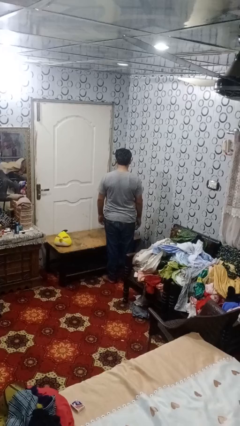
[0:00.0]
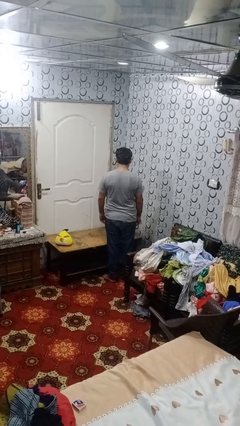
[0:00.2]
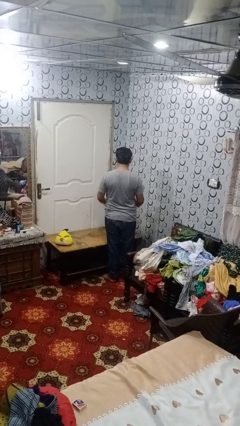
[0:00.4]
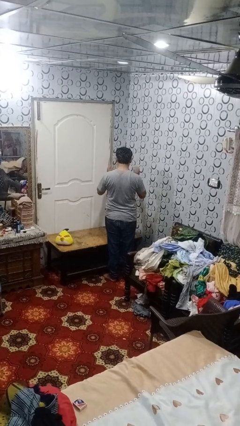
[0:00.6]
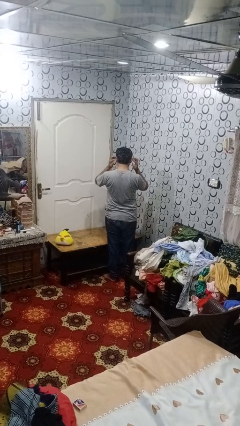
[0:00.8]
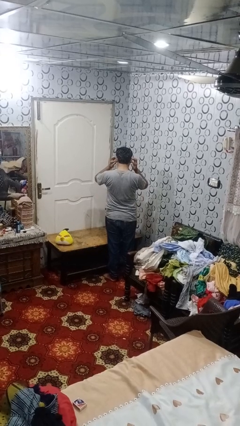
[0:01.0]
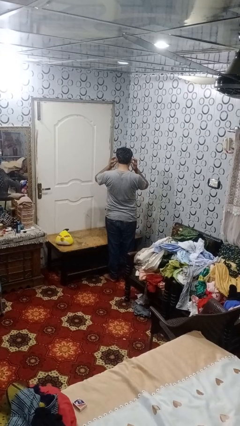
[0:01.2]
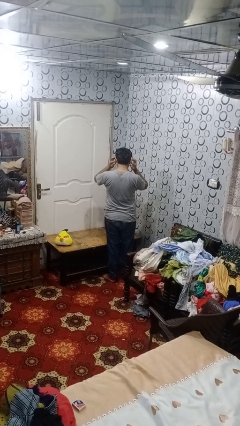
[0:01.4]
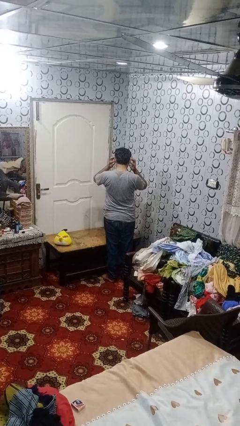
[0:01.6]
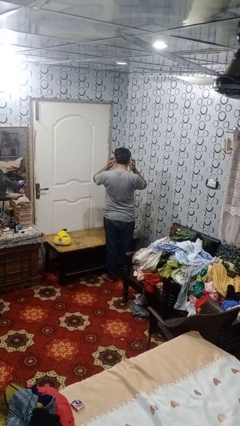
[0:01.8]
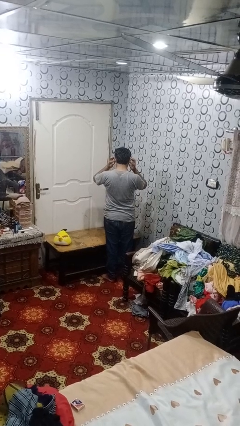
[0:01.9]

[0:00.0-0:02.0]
person puts fingers in ear

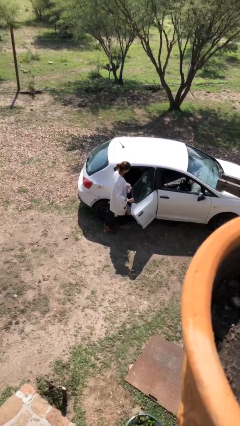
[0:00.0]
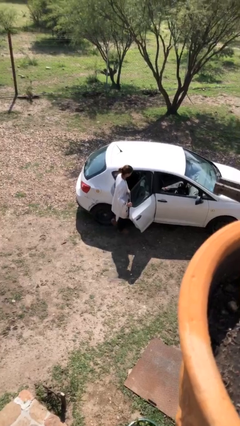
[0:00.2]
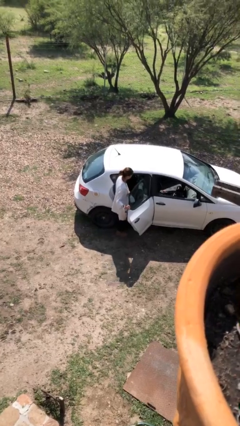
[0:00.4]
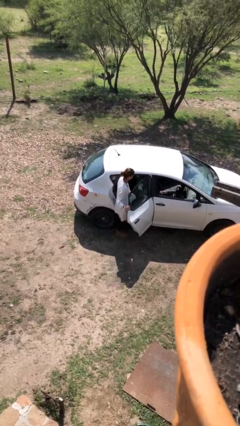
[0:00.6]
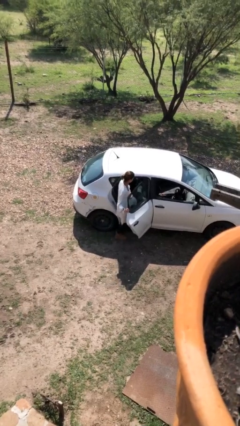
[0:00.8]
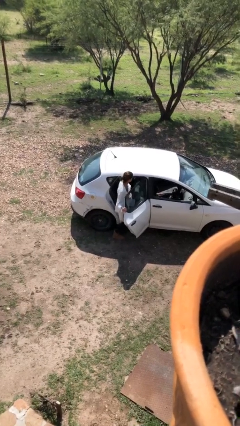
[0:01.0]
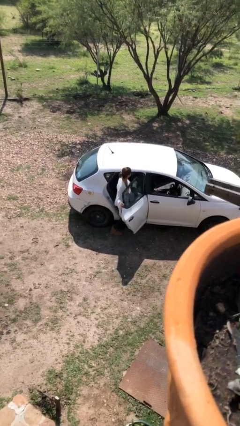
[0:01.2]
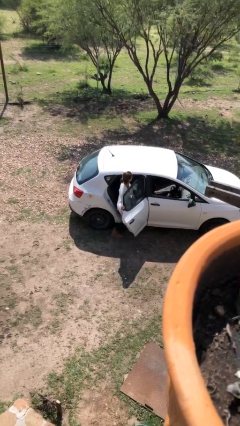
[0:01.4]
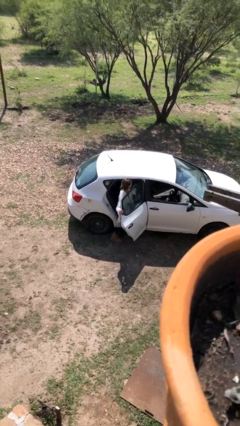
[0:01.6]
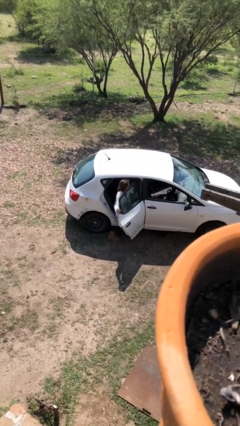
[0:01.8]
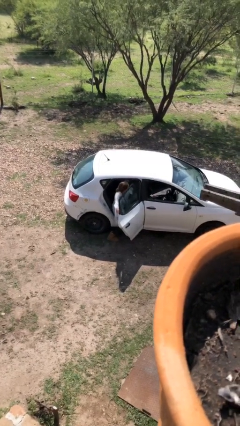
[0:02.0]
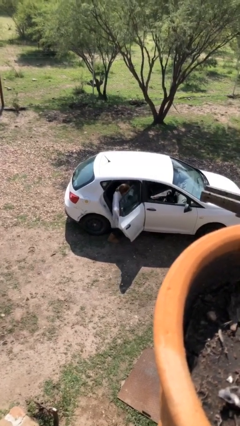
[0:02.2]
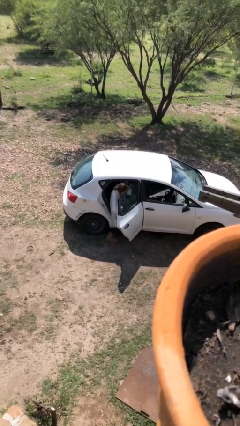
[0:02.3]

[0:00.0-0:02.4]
person enters car

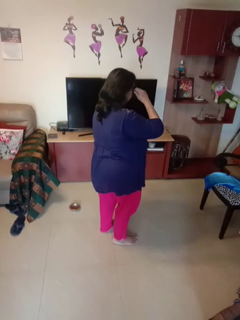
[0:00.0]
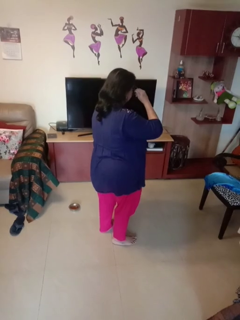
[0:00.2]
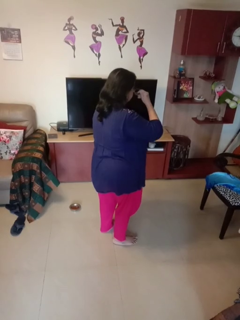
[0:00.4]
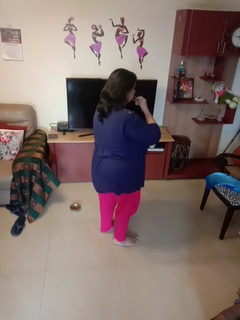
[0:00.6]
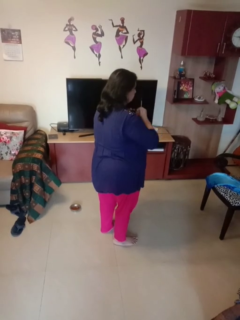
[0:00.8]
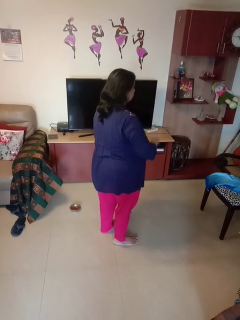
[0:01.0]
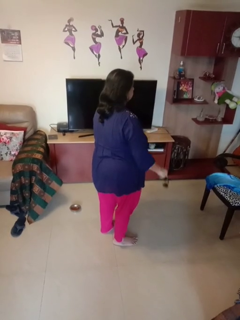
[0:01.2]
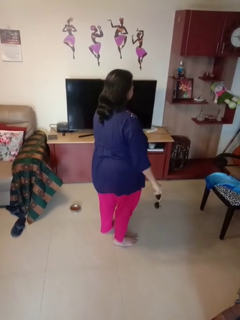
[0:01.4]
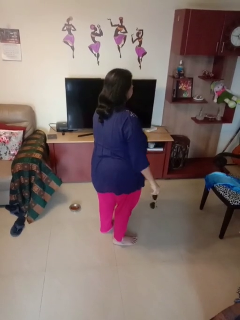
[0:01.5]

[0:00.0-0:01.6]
person takes off sunglasses

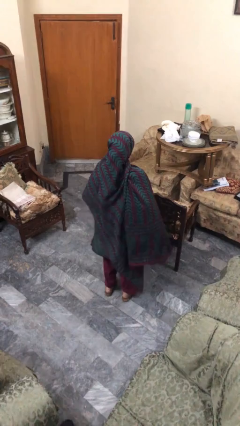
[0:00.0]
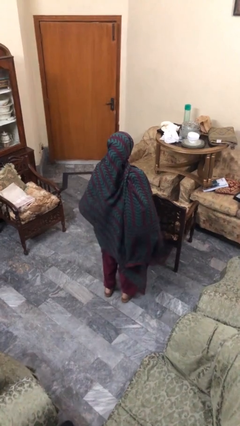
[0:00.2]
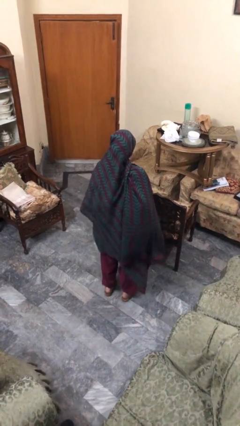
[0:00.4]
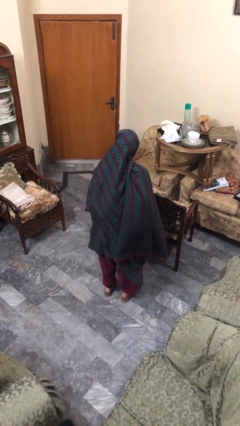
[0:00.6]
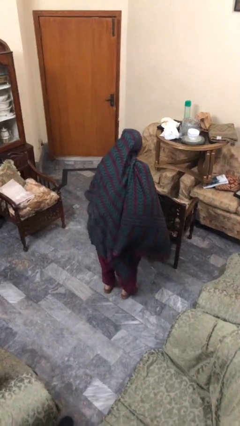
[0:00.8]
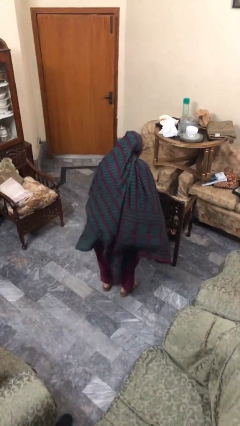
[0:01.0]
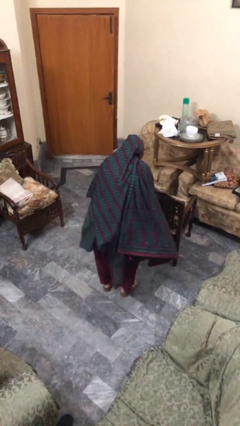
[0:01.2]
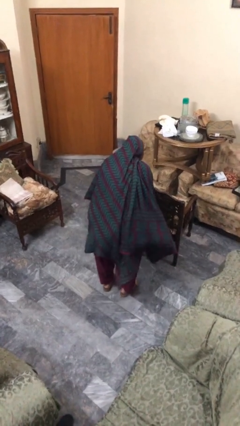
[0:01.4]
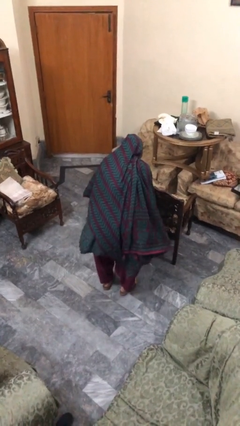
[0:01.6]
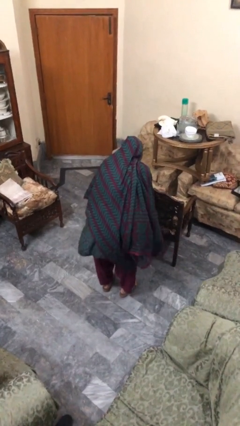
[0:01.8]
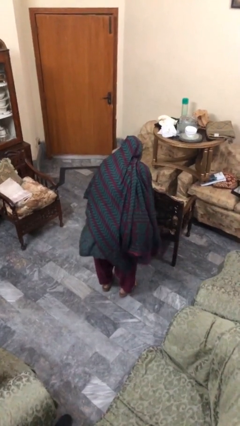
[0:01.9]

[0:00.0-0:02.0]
person bows

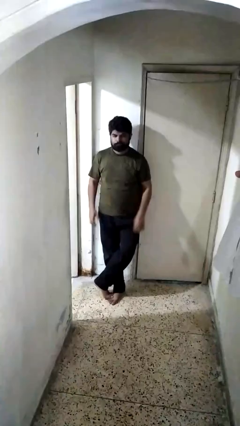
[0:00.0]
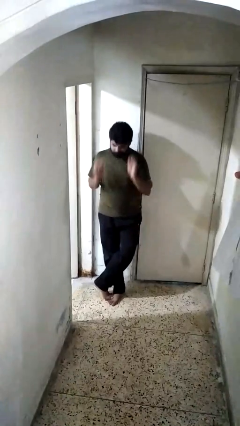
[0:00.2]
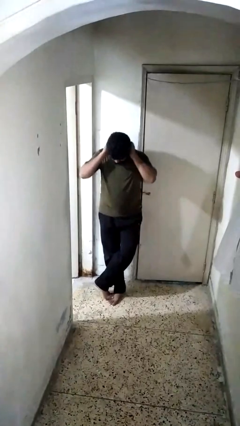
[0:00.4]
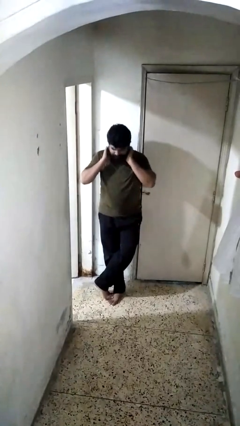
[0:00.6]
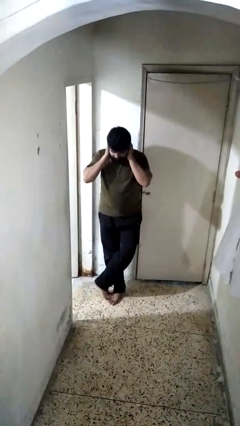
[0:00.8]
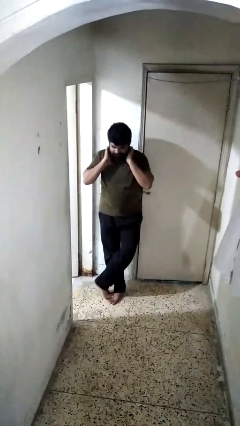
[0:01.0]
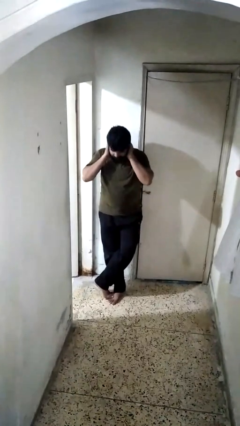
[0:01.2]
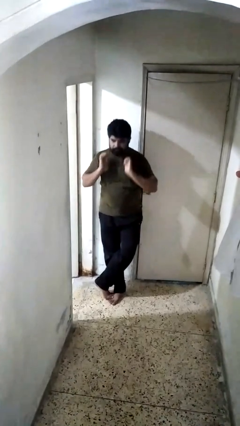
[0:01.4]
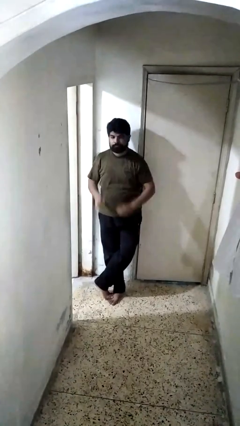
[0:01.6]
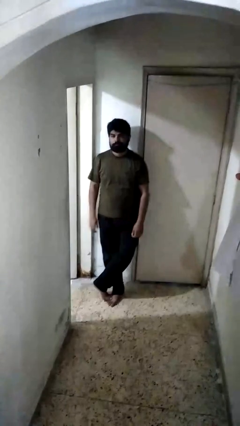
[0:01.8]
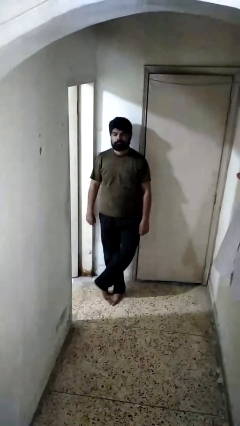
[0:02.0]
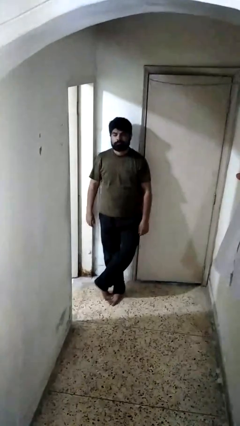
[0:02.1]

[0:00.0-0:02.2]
person rubs neck

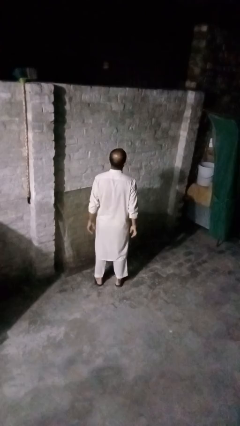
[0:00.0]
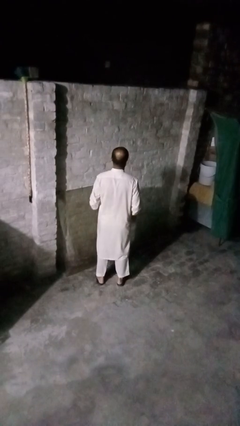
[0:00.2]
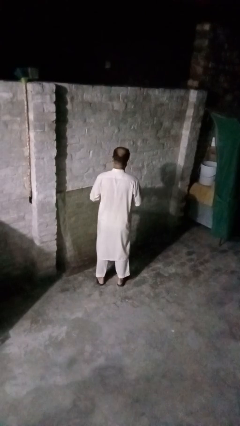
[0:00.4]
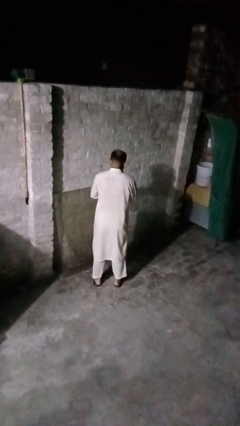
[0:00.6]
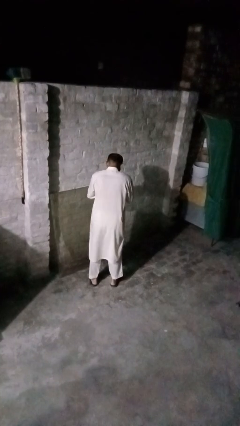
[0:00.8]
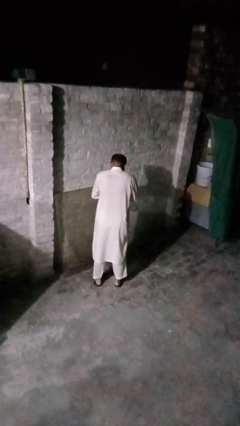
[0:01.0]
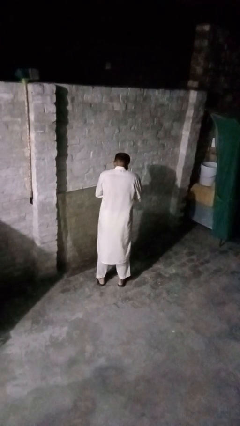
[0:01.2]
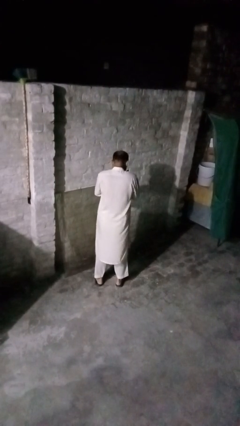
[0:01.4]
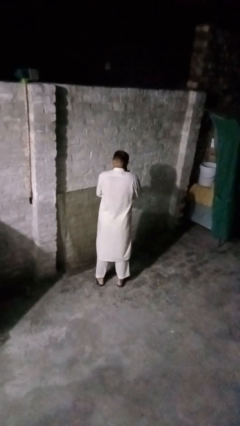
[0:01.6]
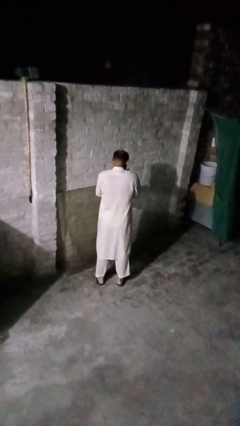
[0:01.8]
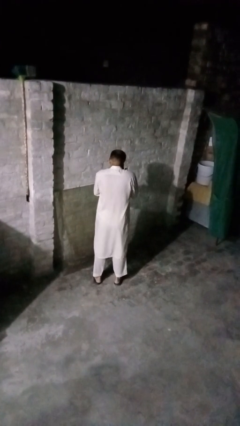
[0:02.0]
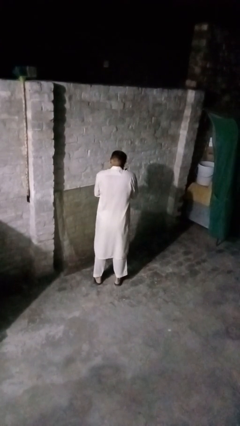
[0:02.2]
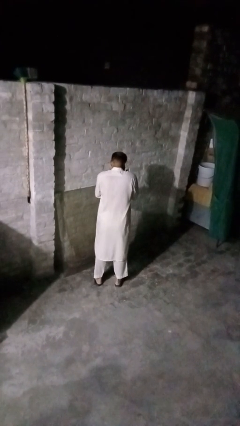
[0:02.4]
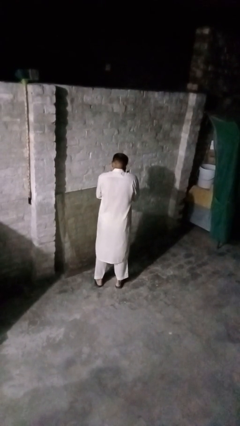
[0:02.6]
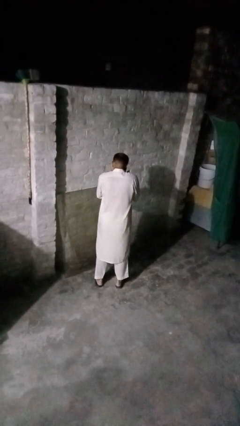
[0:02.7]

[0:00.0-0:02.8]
person sneezes into hand

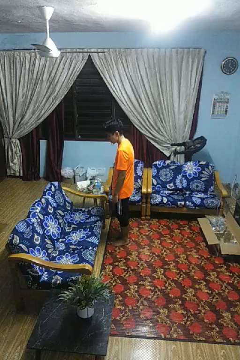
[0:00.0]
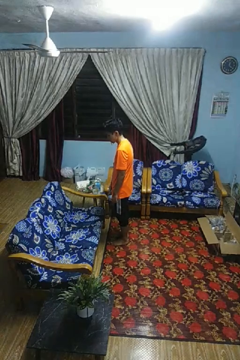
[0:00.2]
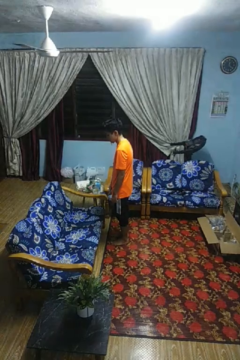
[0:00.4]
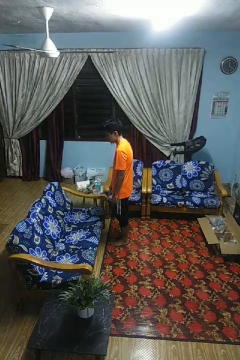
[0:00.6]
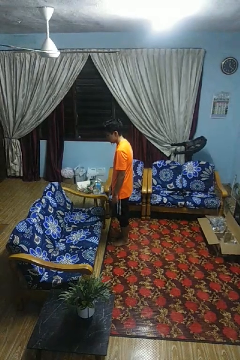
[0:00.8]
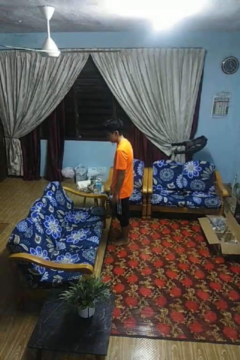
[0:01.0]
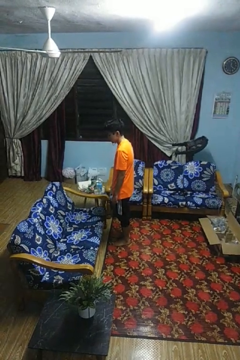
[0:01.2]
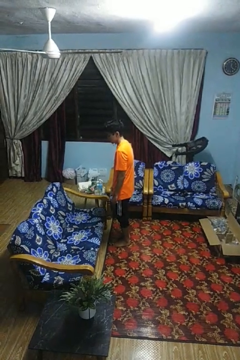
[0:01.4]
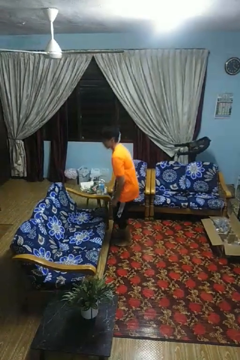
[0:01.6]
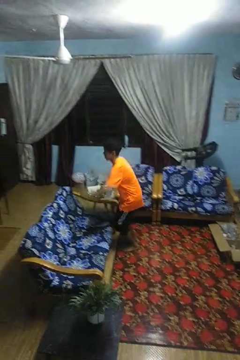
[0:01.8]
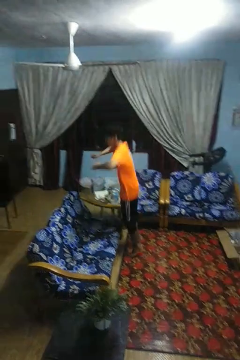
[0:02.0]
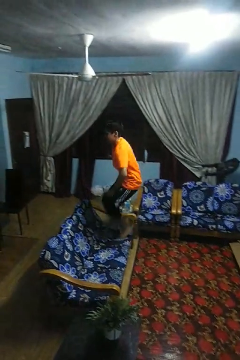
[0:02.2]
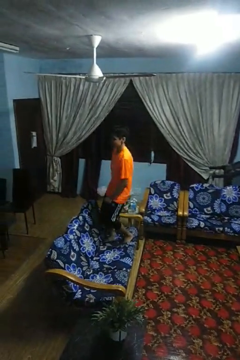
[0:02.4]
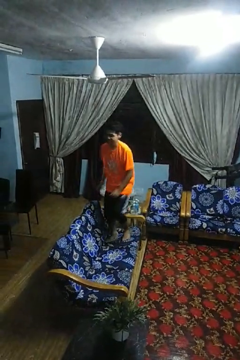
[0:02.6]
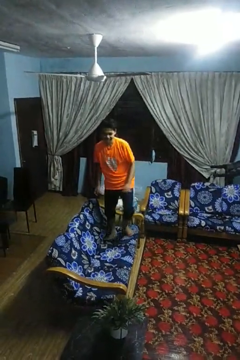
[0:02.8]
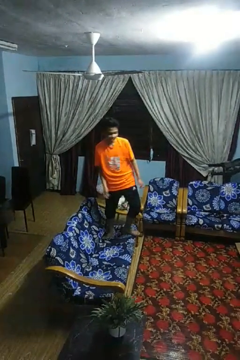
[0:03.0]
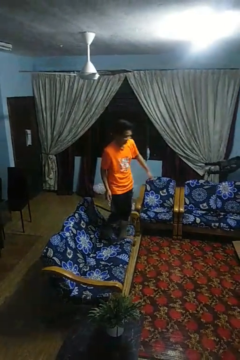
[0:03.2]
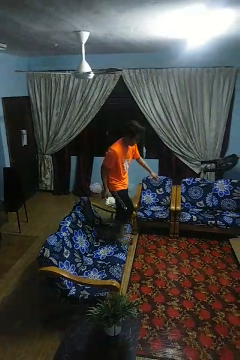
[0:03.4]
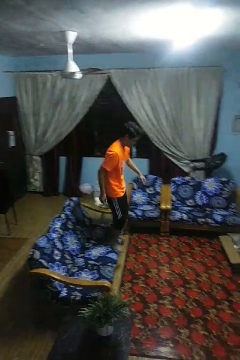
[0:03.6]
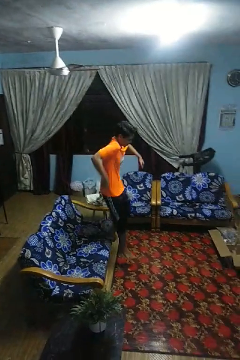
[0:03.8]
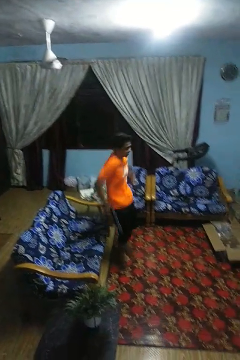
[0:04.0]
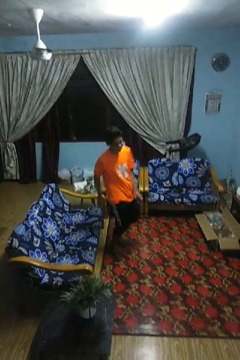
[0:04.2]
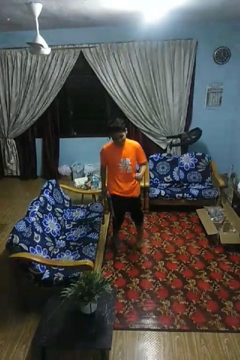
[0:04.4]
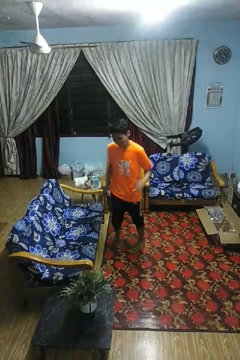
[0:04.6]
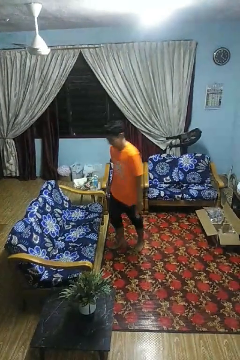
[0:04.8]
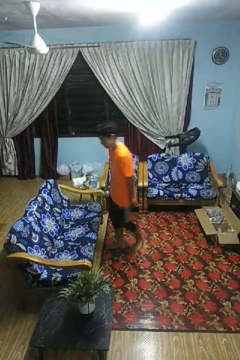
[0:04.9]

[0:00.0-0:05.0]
person jumps on couch

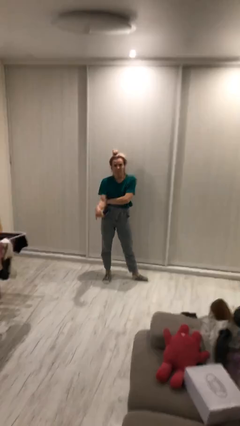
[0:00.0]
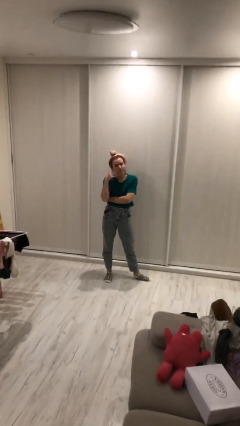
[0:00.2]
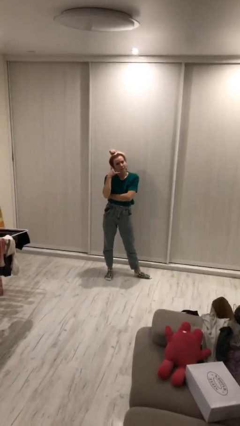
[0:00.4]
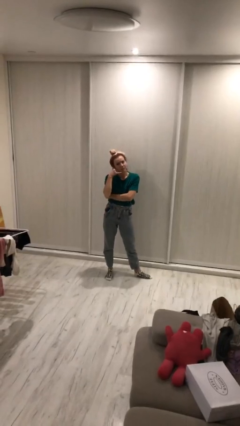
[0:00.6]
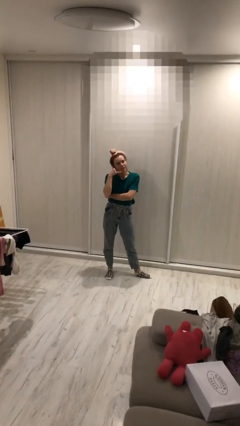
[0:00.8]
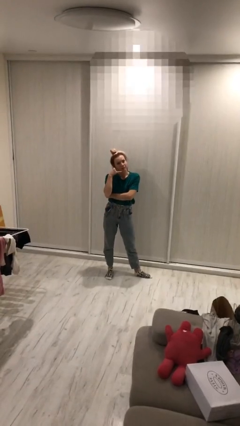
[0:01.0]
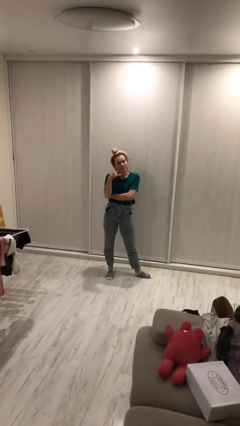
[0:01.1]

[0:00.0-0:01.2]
person gestures call me
